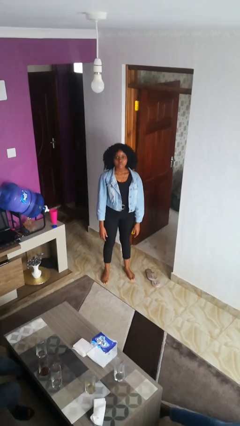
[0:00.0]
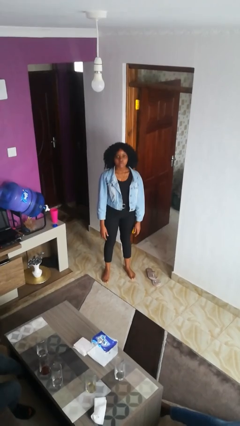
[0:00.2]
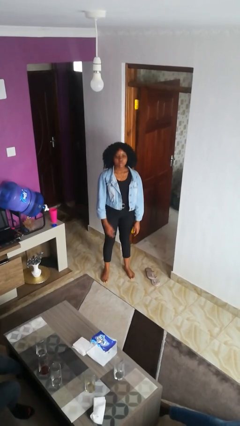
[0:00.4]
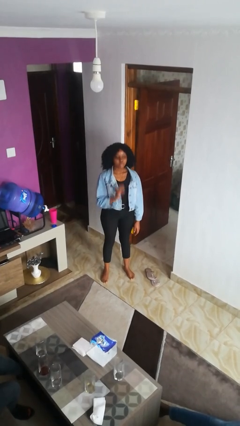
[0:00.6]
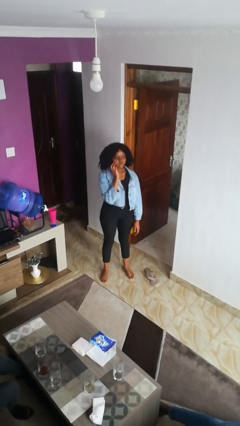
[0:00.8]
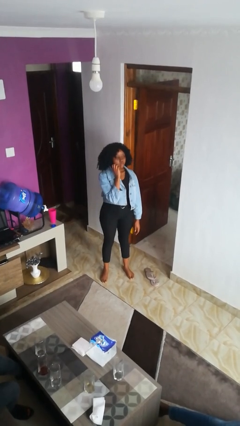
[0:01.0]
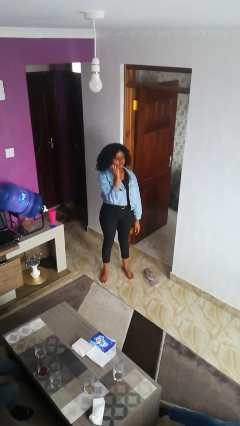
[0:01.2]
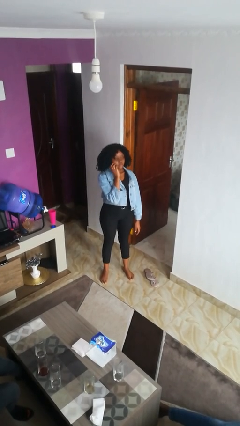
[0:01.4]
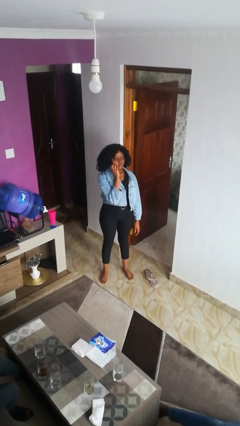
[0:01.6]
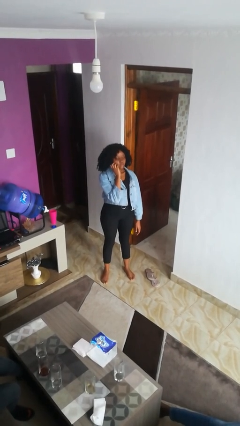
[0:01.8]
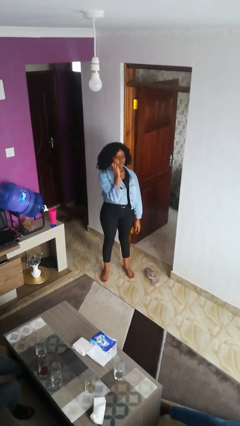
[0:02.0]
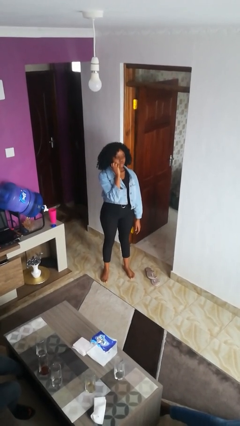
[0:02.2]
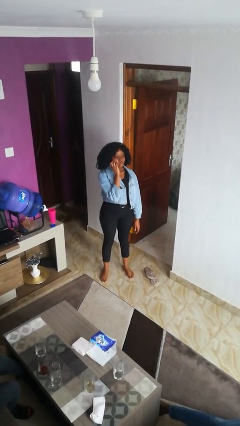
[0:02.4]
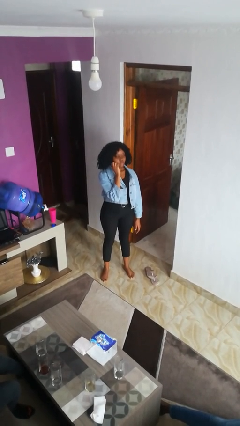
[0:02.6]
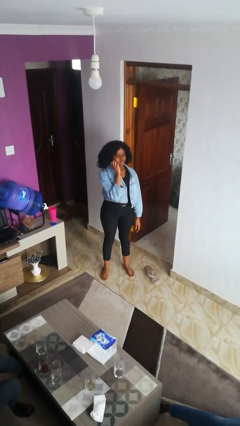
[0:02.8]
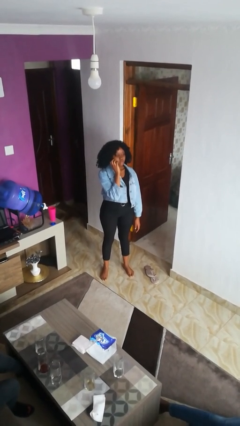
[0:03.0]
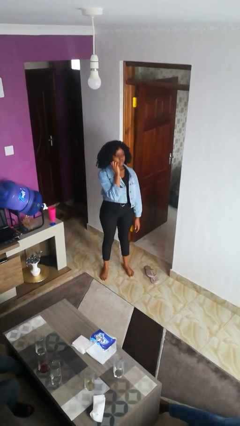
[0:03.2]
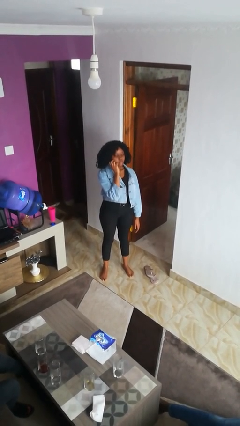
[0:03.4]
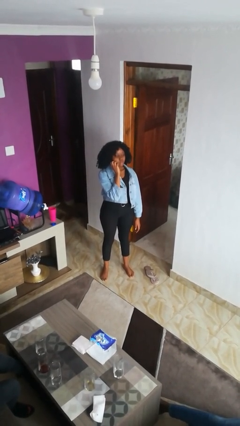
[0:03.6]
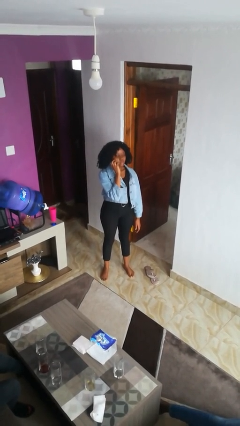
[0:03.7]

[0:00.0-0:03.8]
person scratches face

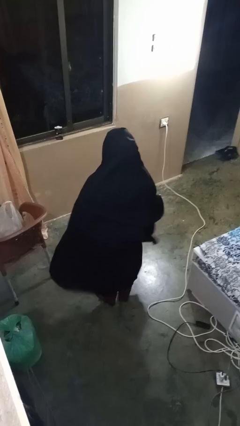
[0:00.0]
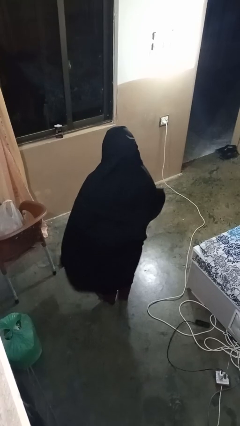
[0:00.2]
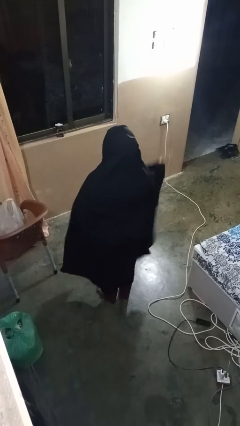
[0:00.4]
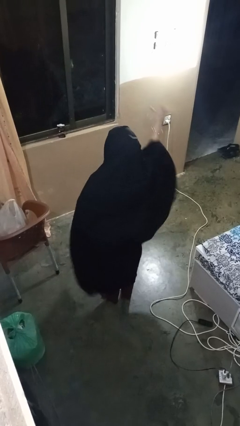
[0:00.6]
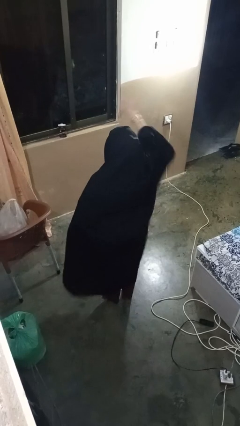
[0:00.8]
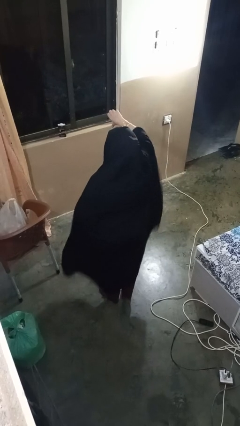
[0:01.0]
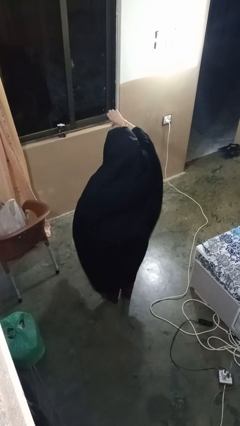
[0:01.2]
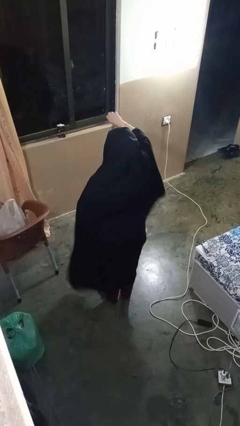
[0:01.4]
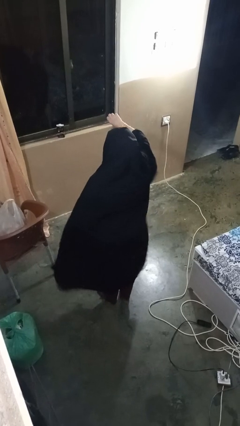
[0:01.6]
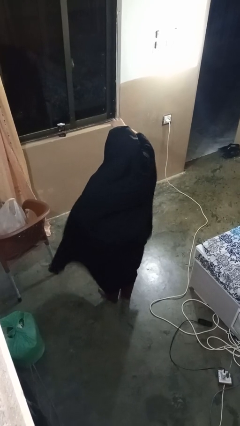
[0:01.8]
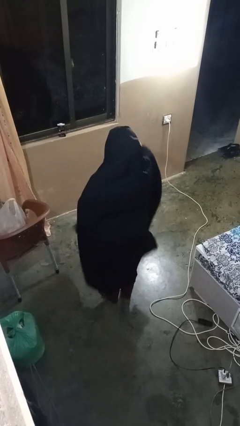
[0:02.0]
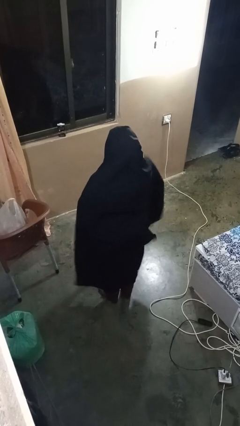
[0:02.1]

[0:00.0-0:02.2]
person gestures thumbs down

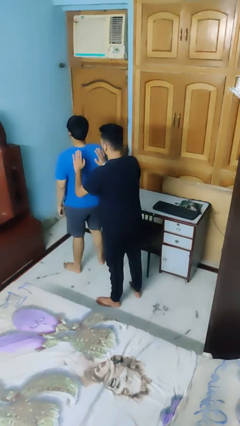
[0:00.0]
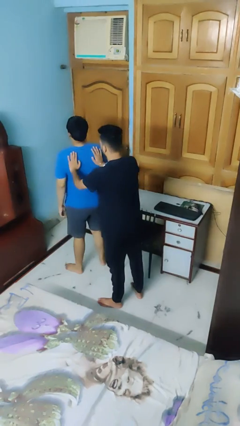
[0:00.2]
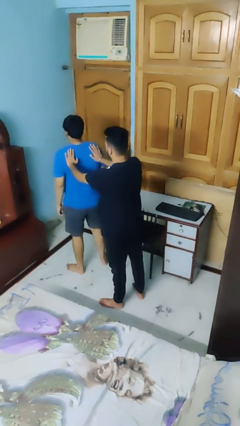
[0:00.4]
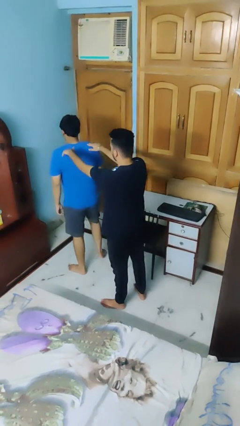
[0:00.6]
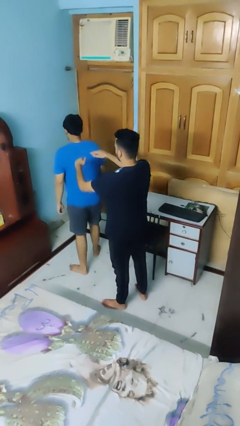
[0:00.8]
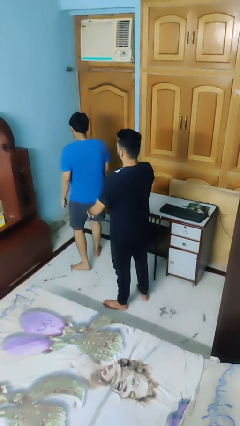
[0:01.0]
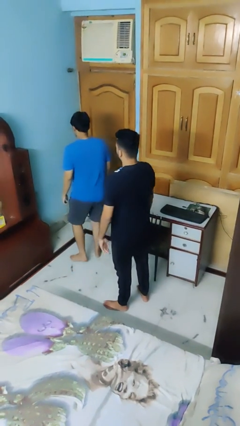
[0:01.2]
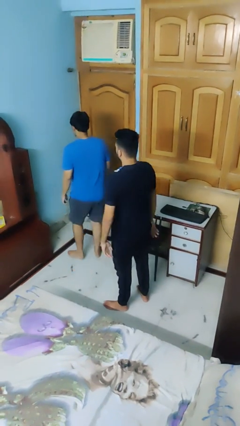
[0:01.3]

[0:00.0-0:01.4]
person shoves person

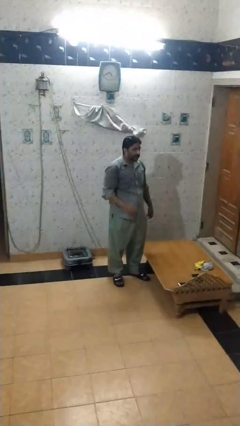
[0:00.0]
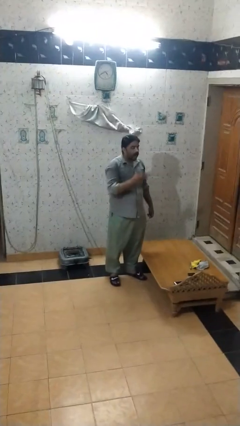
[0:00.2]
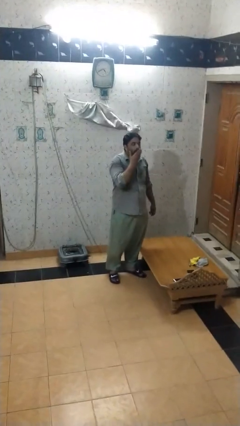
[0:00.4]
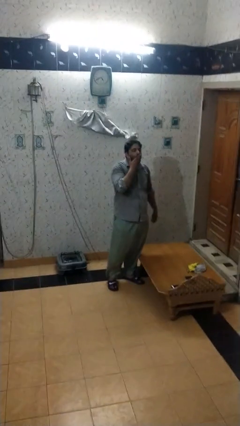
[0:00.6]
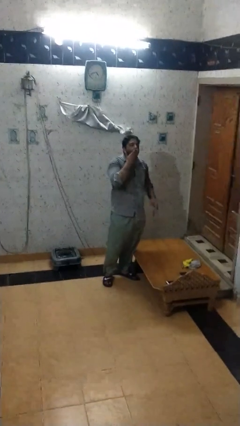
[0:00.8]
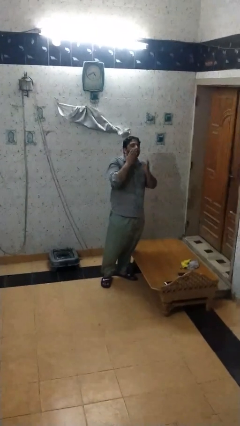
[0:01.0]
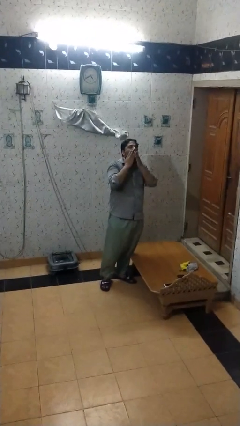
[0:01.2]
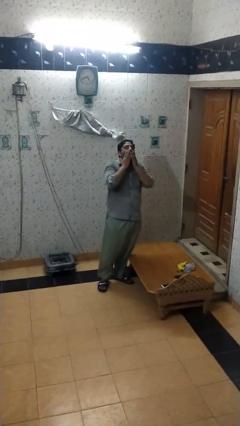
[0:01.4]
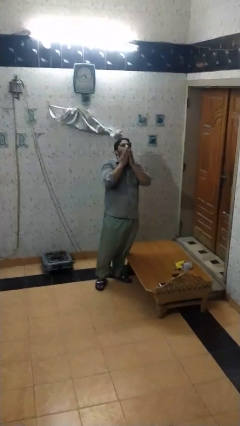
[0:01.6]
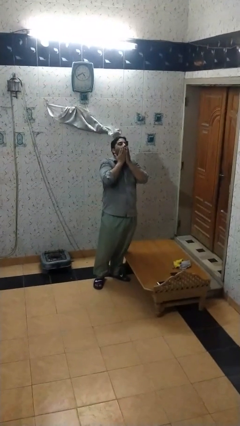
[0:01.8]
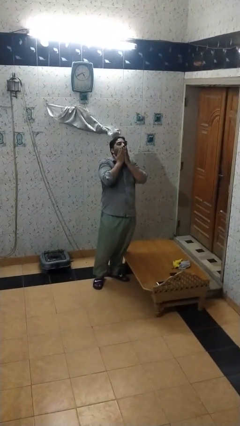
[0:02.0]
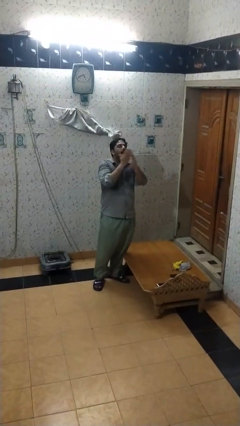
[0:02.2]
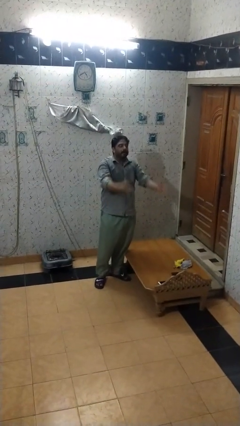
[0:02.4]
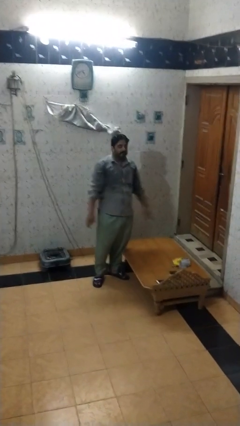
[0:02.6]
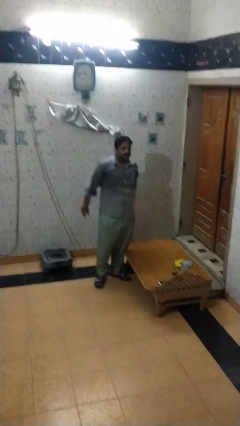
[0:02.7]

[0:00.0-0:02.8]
person yawns

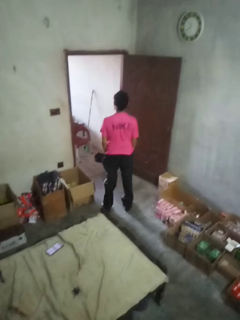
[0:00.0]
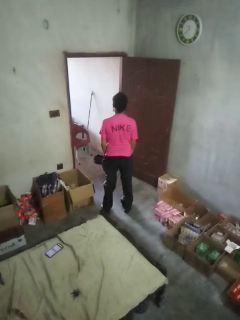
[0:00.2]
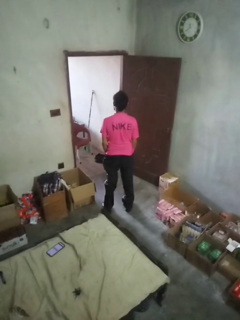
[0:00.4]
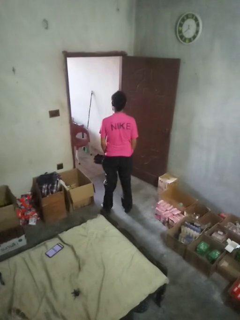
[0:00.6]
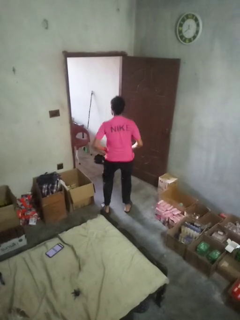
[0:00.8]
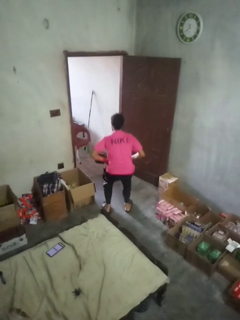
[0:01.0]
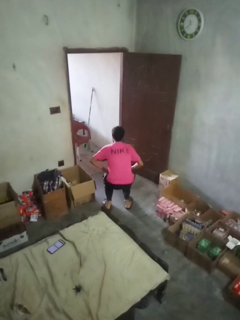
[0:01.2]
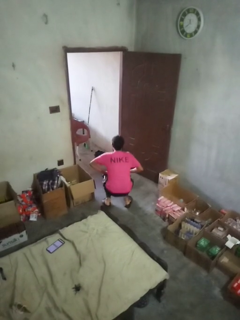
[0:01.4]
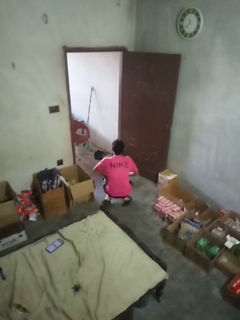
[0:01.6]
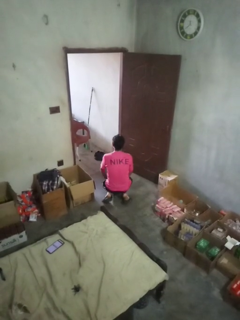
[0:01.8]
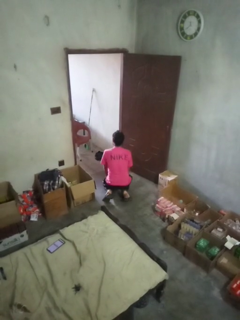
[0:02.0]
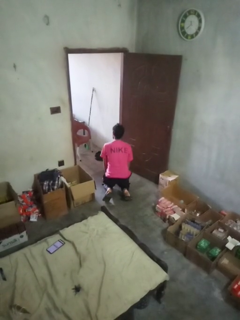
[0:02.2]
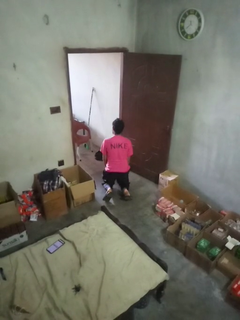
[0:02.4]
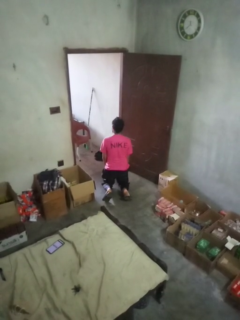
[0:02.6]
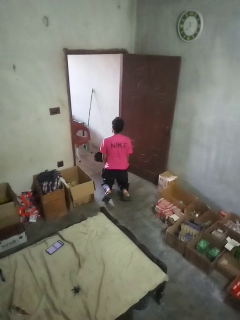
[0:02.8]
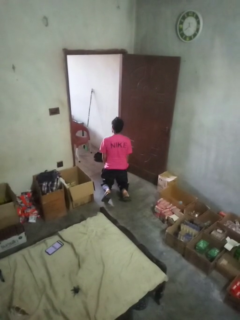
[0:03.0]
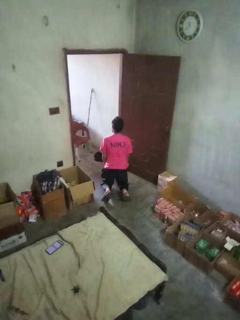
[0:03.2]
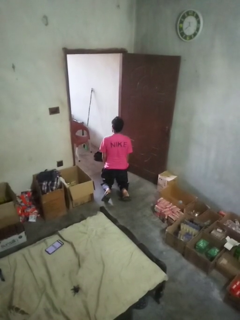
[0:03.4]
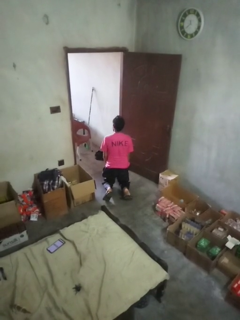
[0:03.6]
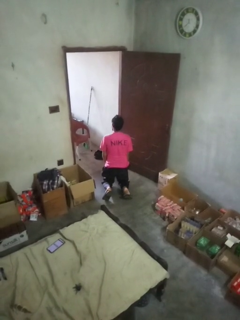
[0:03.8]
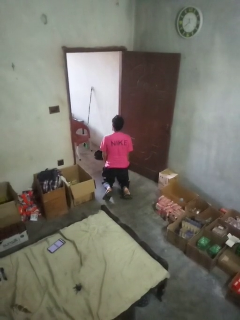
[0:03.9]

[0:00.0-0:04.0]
person kneels

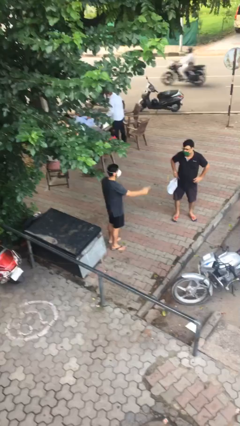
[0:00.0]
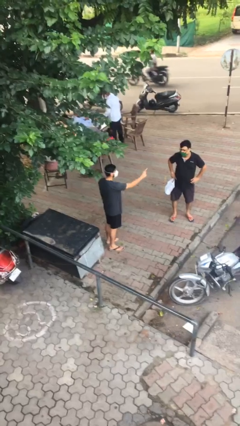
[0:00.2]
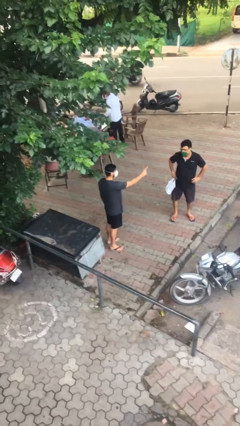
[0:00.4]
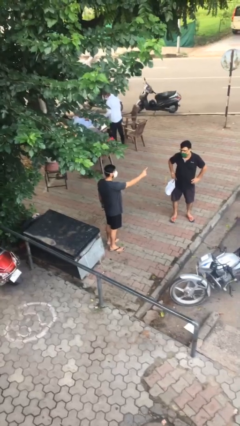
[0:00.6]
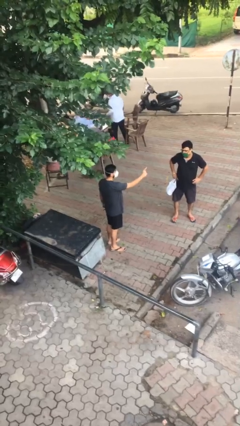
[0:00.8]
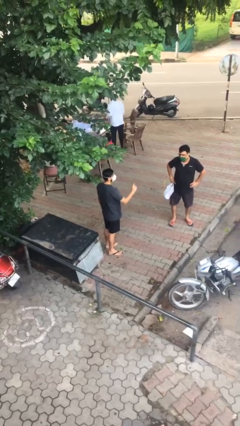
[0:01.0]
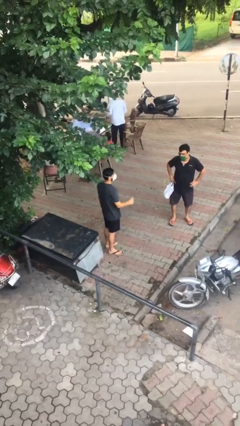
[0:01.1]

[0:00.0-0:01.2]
person points at person

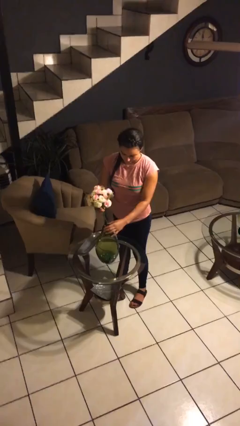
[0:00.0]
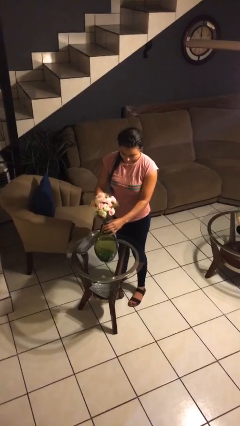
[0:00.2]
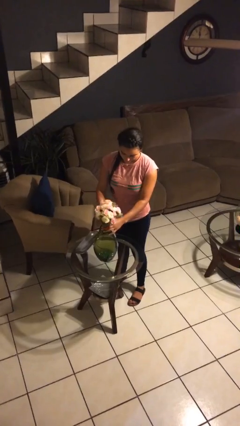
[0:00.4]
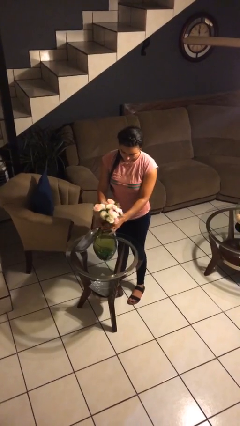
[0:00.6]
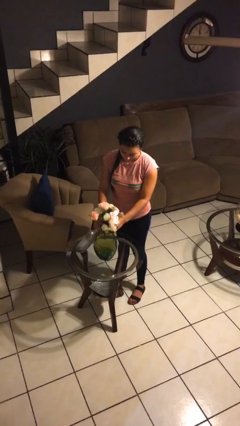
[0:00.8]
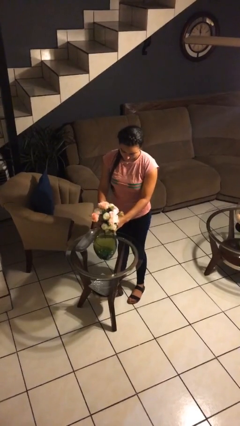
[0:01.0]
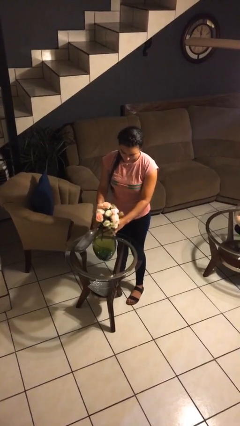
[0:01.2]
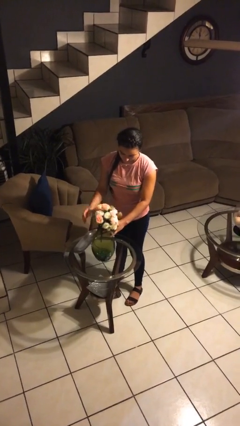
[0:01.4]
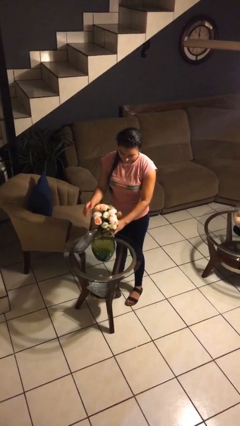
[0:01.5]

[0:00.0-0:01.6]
person arranges flowers in vase

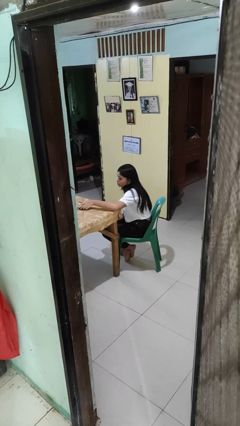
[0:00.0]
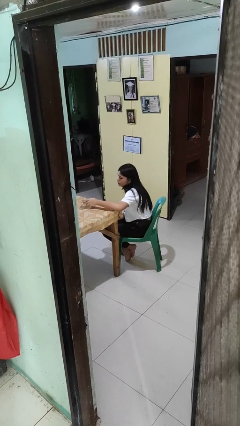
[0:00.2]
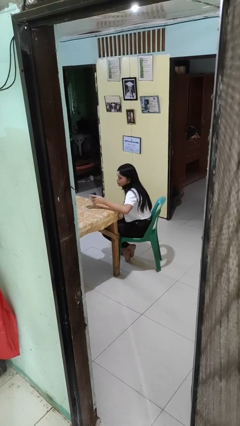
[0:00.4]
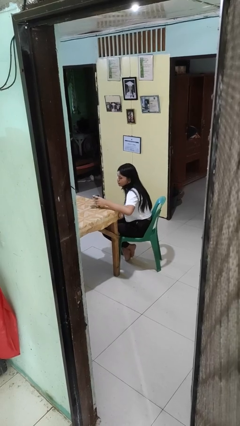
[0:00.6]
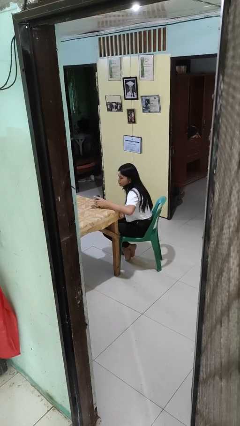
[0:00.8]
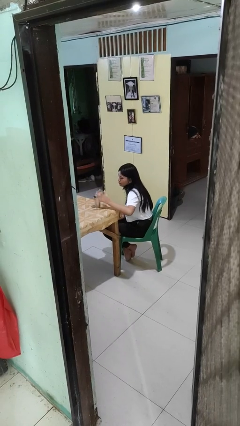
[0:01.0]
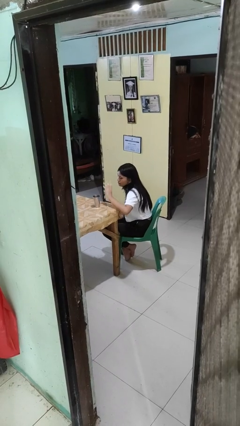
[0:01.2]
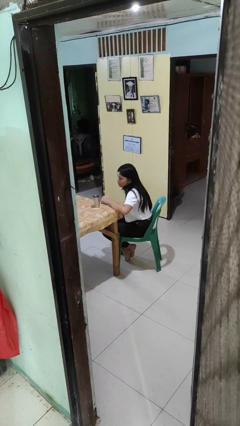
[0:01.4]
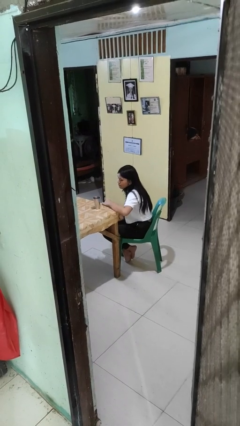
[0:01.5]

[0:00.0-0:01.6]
person sets upright glass
